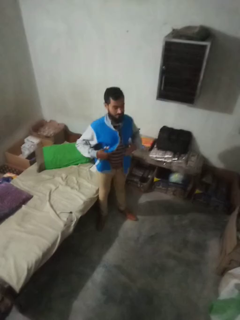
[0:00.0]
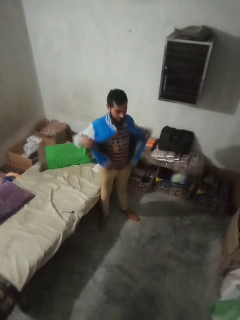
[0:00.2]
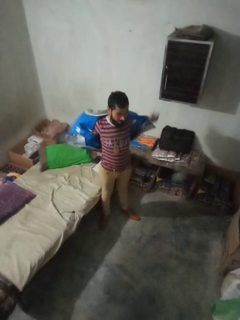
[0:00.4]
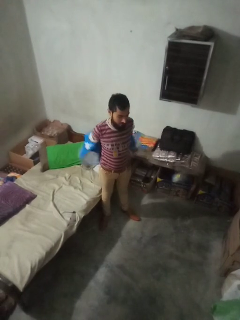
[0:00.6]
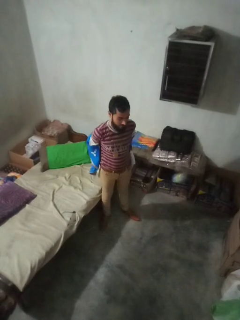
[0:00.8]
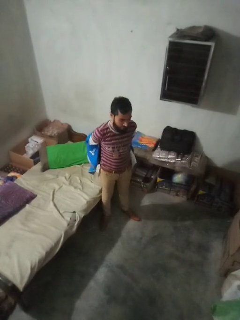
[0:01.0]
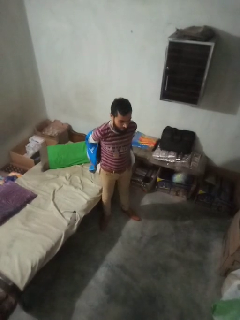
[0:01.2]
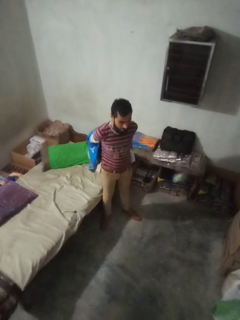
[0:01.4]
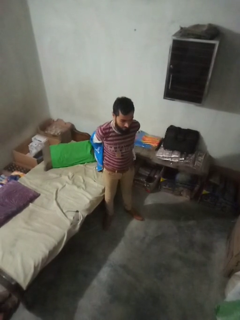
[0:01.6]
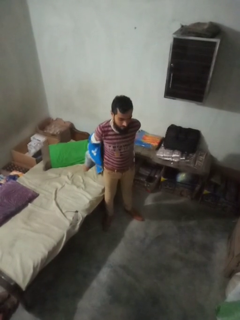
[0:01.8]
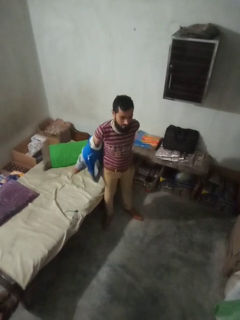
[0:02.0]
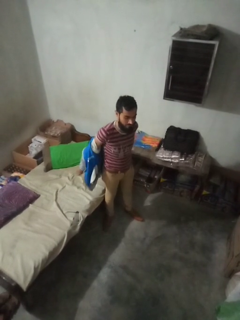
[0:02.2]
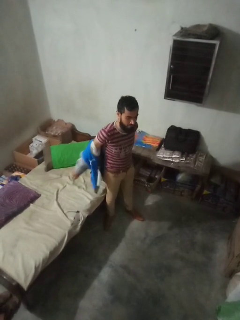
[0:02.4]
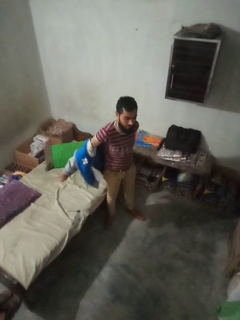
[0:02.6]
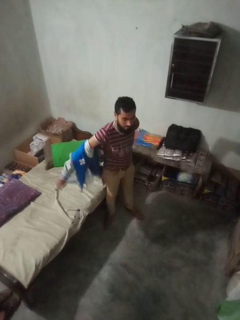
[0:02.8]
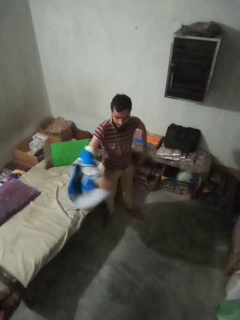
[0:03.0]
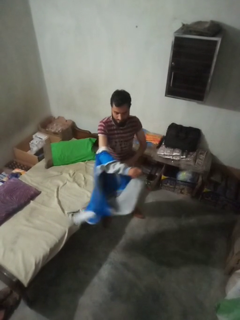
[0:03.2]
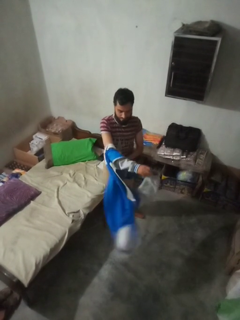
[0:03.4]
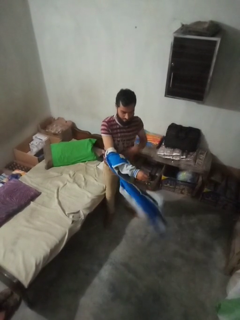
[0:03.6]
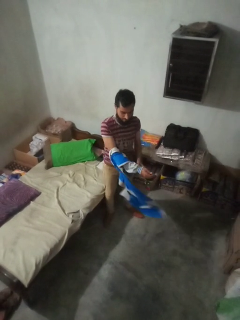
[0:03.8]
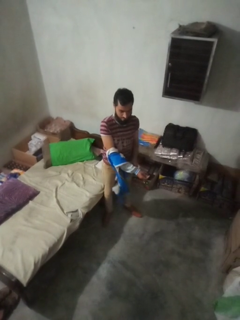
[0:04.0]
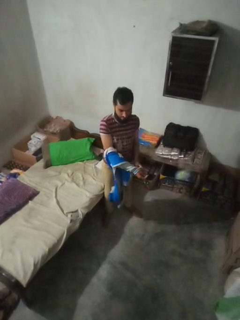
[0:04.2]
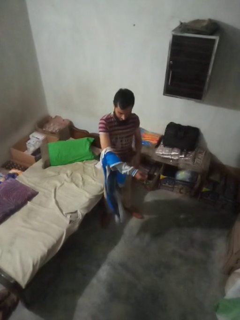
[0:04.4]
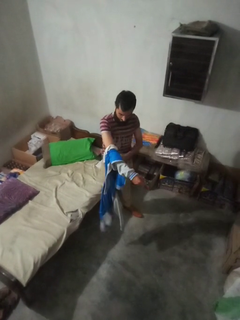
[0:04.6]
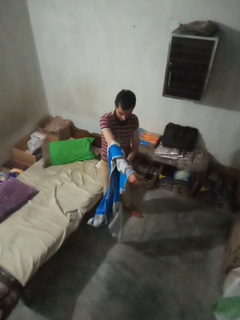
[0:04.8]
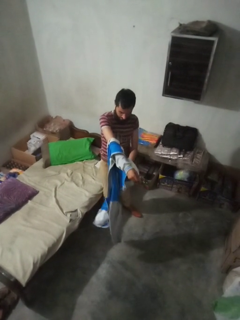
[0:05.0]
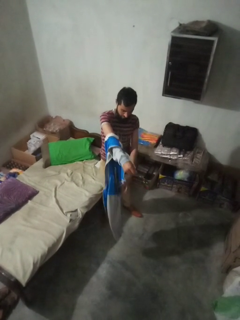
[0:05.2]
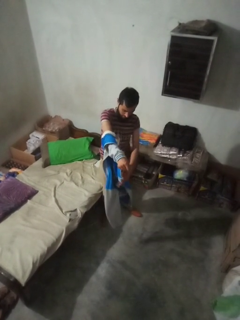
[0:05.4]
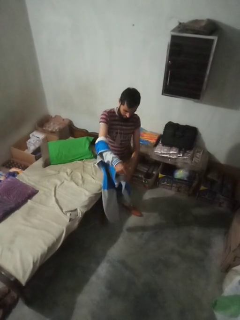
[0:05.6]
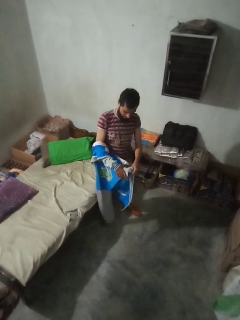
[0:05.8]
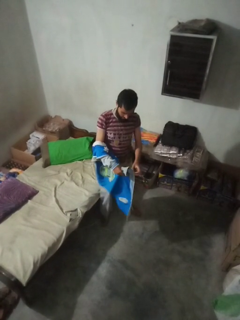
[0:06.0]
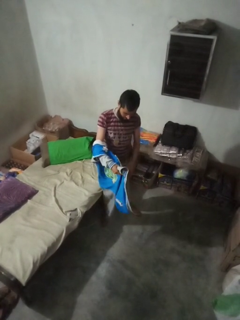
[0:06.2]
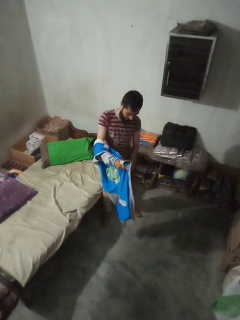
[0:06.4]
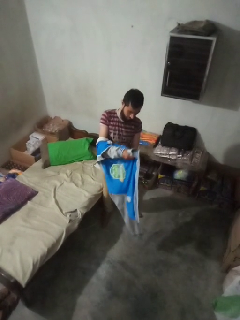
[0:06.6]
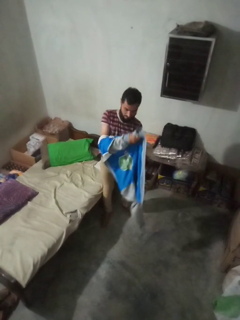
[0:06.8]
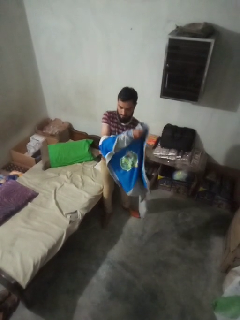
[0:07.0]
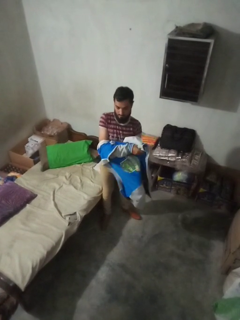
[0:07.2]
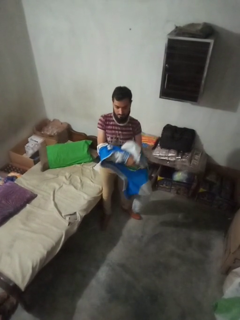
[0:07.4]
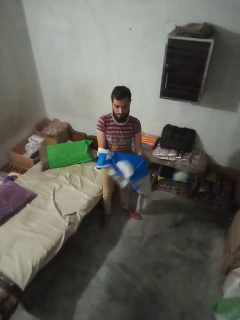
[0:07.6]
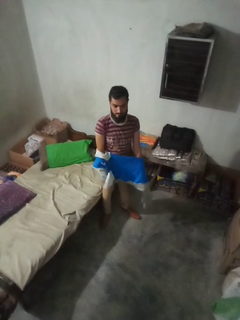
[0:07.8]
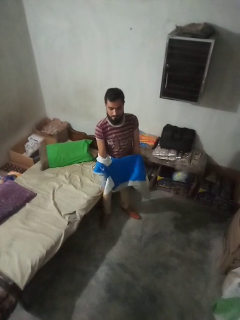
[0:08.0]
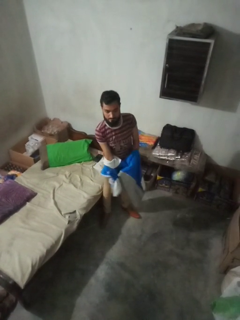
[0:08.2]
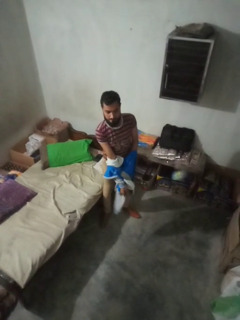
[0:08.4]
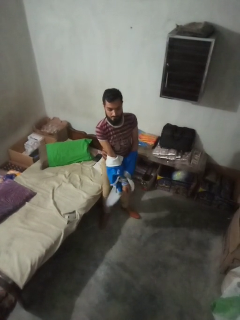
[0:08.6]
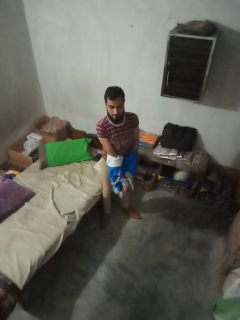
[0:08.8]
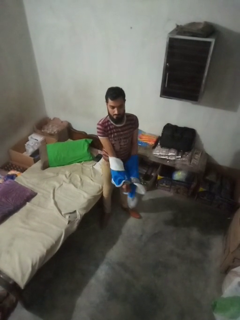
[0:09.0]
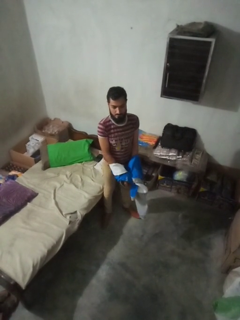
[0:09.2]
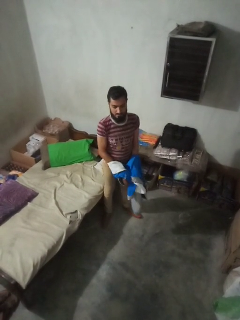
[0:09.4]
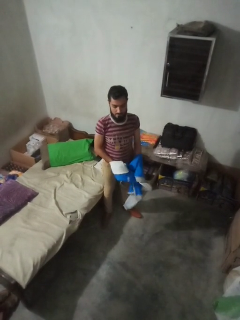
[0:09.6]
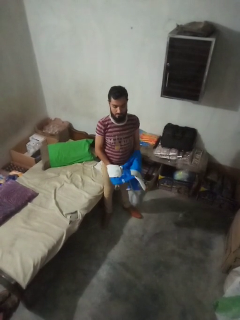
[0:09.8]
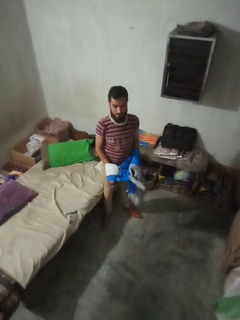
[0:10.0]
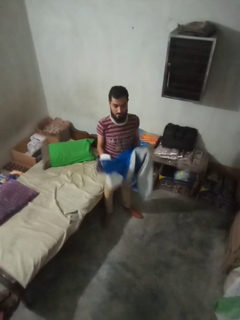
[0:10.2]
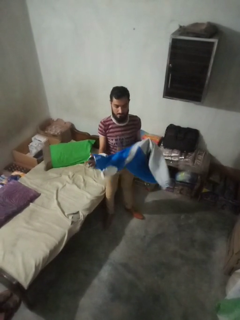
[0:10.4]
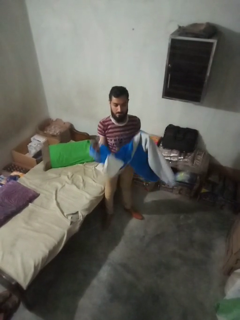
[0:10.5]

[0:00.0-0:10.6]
person takes off jacket

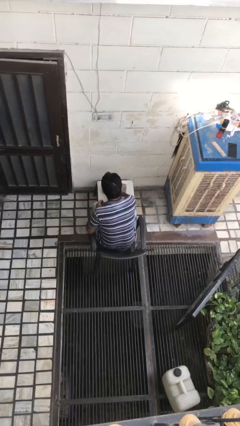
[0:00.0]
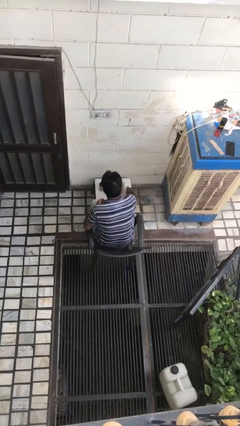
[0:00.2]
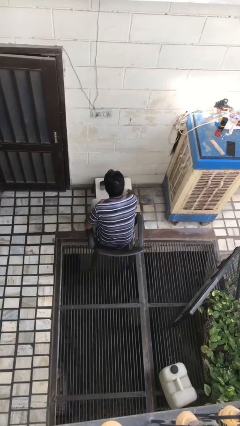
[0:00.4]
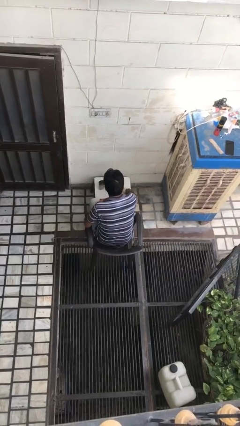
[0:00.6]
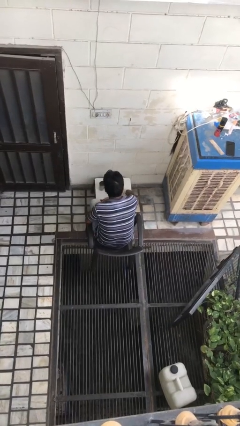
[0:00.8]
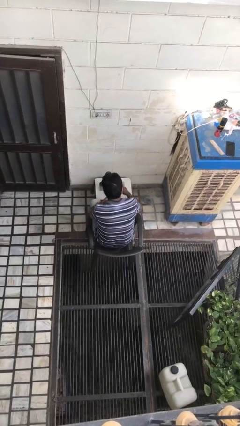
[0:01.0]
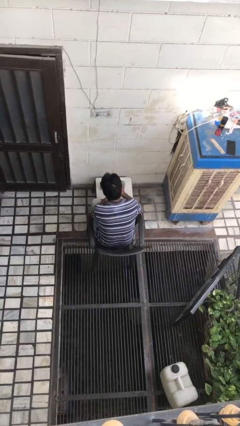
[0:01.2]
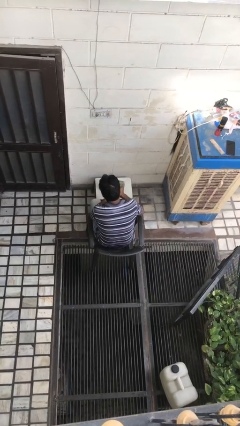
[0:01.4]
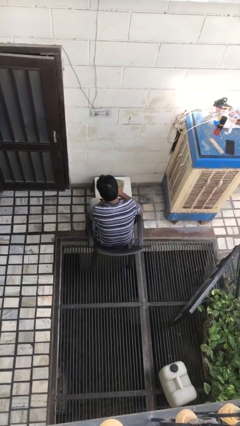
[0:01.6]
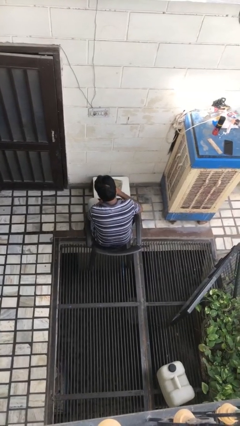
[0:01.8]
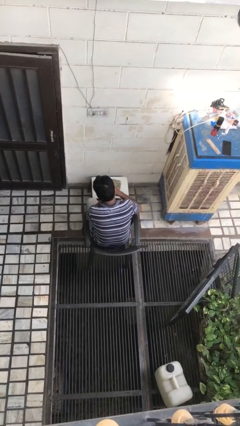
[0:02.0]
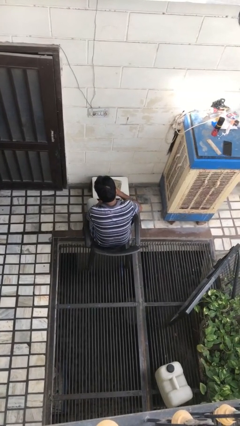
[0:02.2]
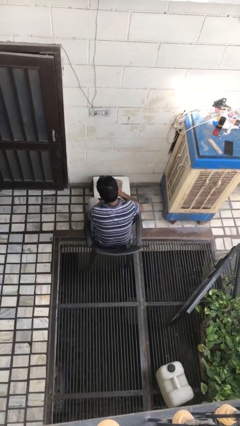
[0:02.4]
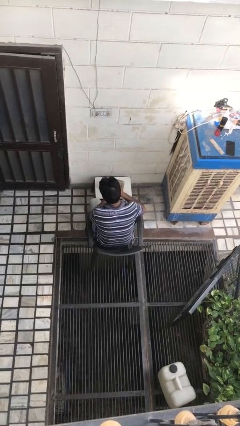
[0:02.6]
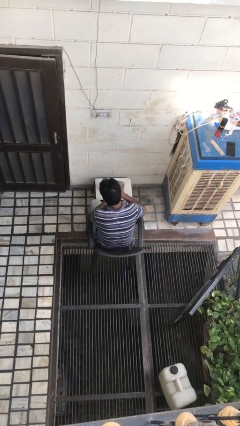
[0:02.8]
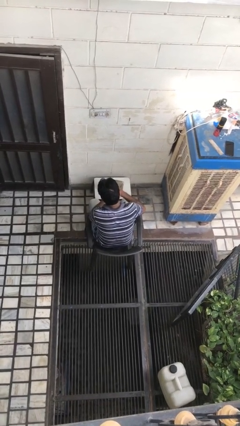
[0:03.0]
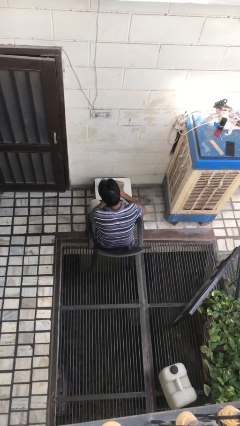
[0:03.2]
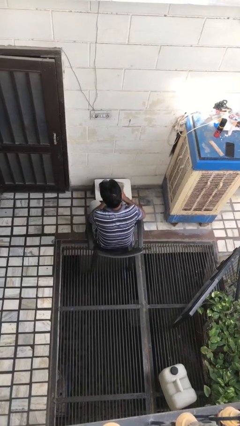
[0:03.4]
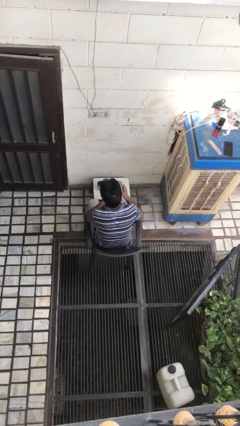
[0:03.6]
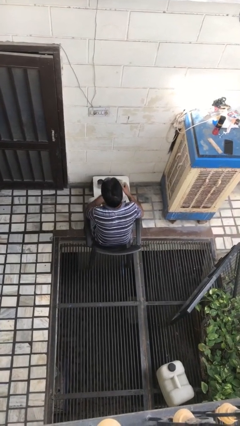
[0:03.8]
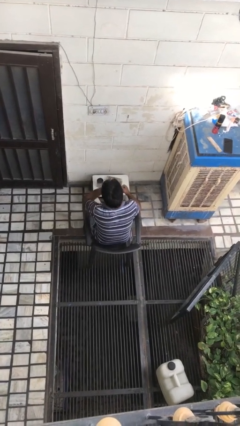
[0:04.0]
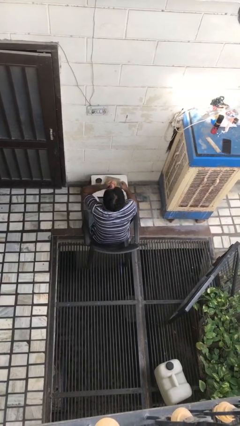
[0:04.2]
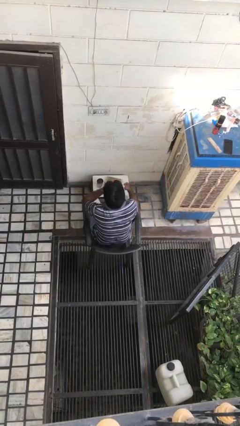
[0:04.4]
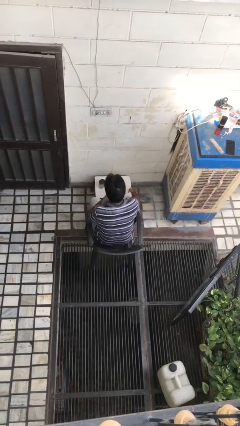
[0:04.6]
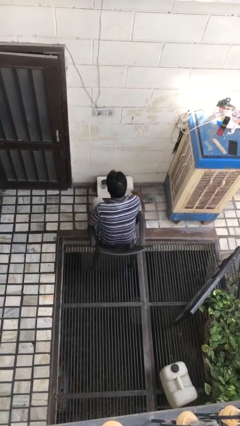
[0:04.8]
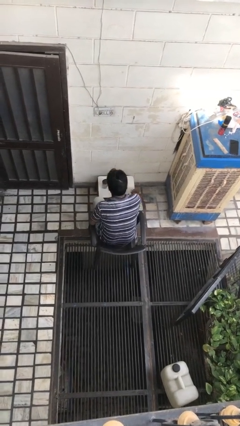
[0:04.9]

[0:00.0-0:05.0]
person takes medicine pills

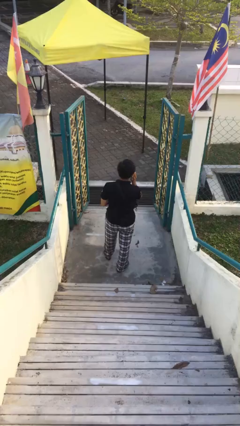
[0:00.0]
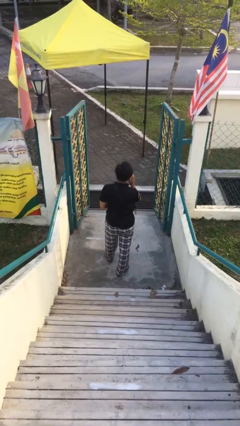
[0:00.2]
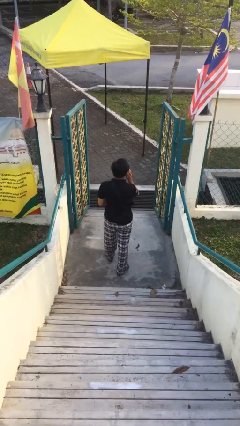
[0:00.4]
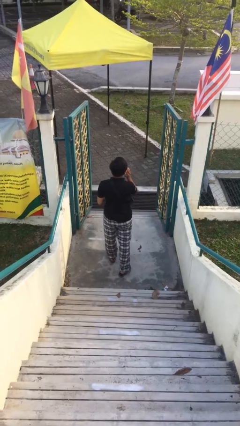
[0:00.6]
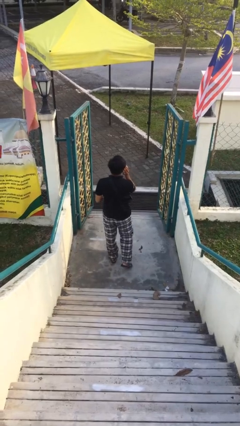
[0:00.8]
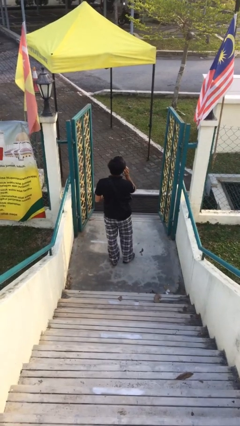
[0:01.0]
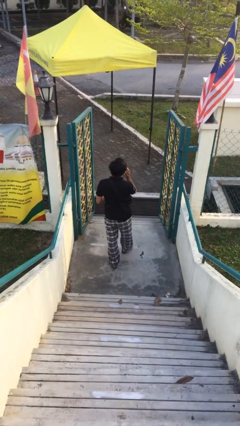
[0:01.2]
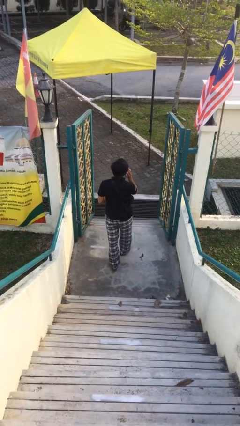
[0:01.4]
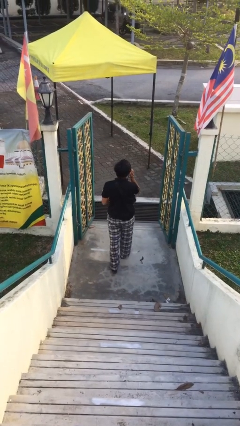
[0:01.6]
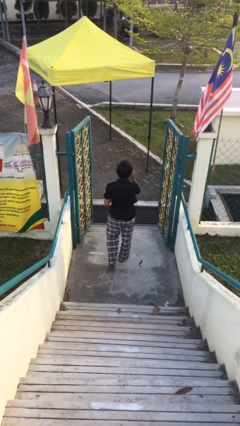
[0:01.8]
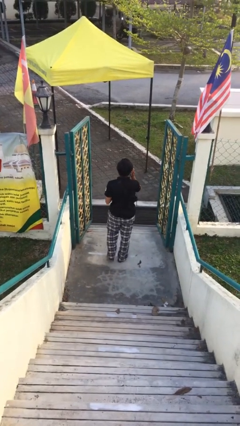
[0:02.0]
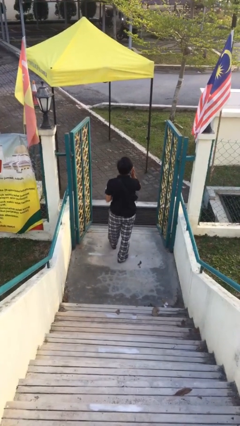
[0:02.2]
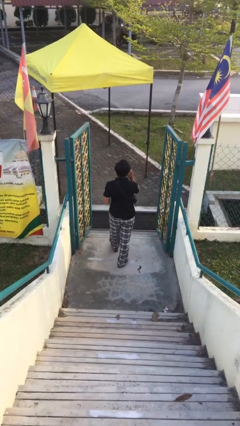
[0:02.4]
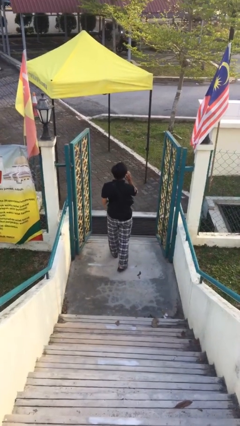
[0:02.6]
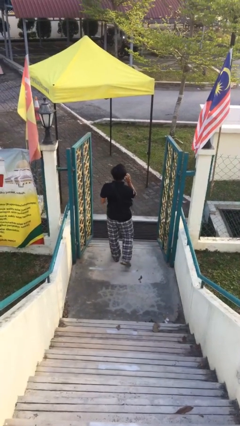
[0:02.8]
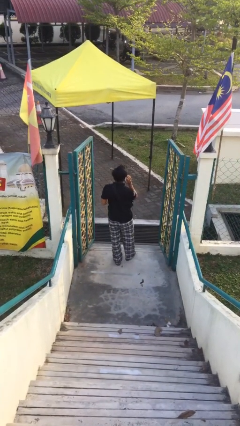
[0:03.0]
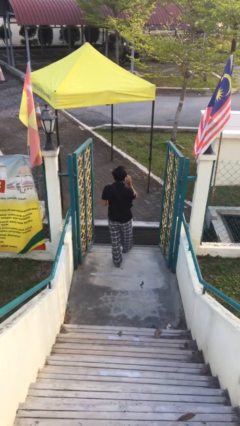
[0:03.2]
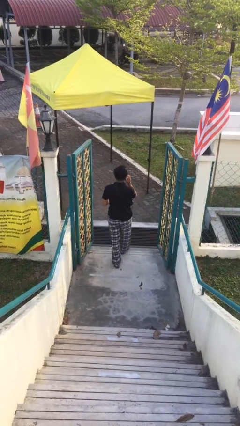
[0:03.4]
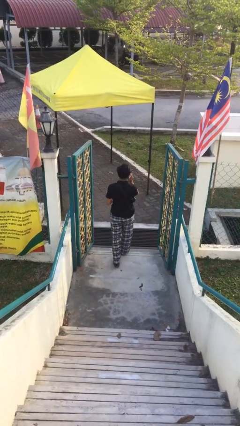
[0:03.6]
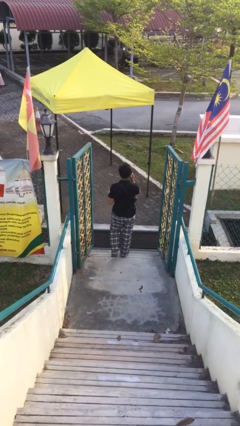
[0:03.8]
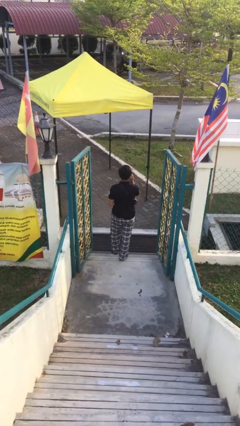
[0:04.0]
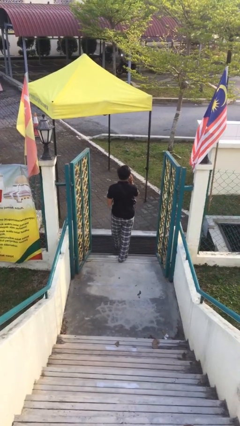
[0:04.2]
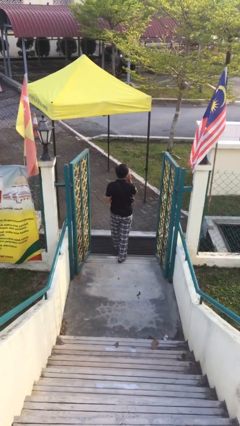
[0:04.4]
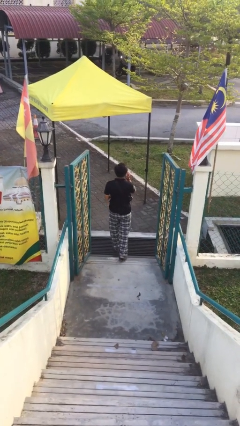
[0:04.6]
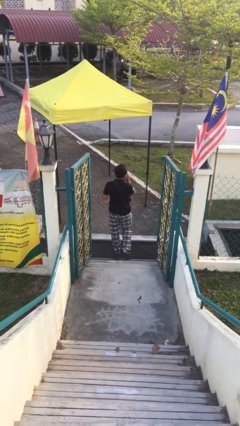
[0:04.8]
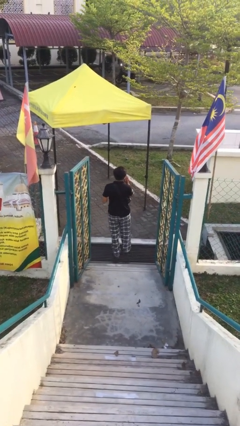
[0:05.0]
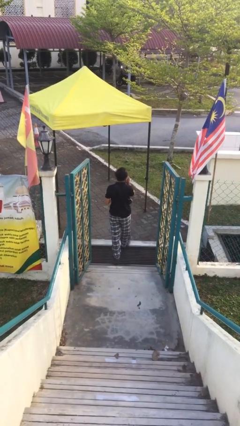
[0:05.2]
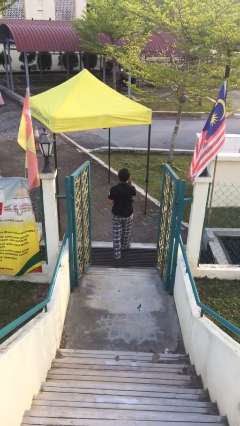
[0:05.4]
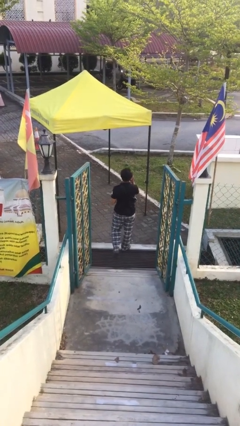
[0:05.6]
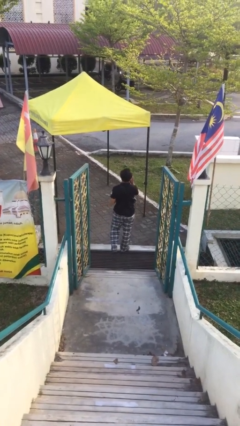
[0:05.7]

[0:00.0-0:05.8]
person exits scene through structure
